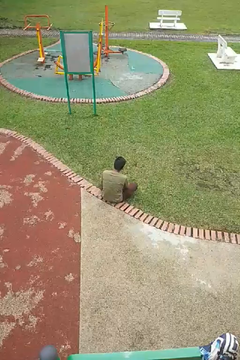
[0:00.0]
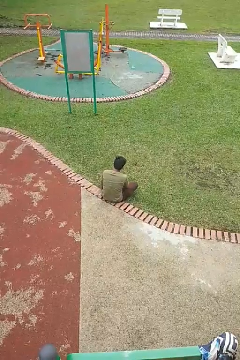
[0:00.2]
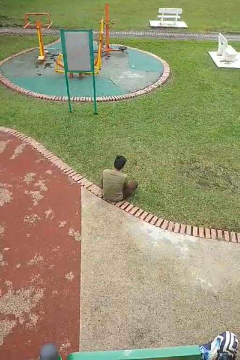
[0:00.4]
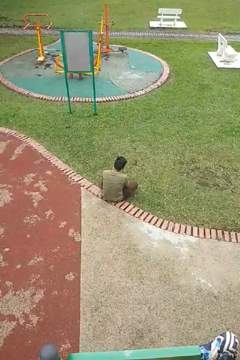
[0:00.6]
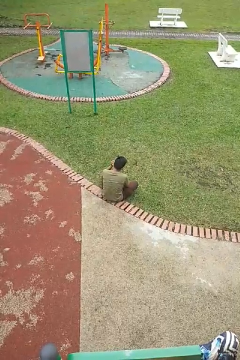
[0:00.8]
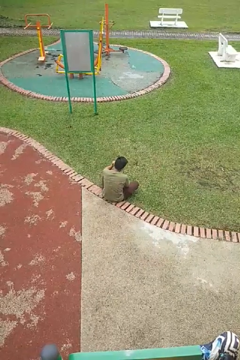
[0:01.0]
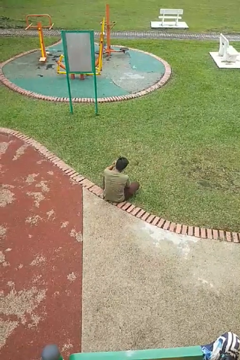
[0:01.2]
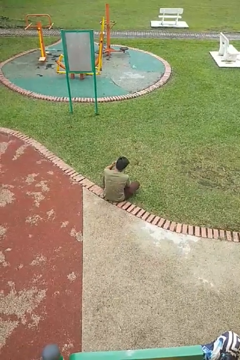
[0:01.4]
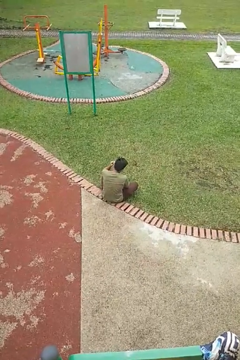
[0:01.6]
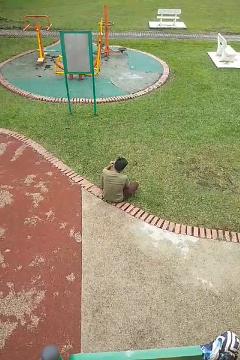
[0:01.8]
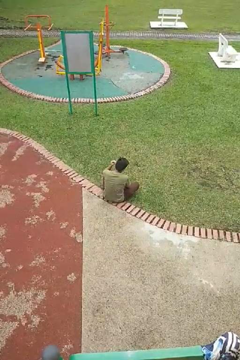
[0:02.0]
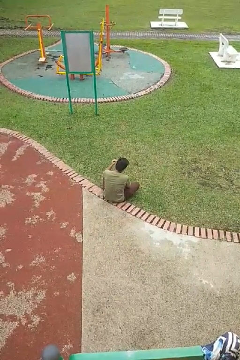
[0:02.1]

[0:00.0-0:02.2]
person touches earlobe

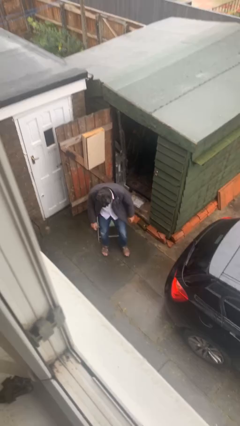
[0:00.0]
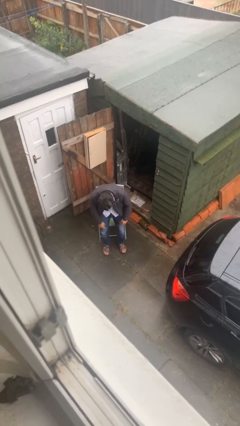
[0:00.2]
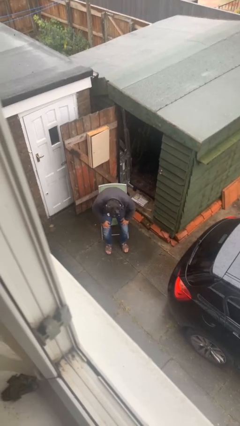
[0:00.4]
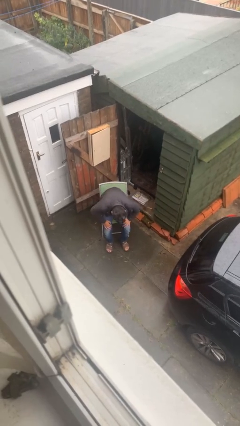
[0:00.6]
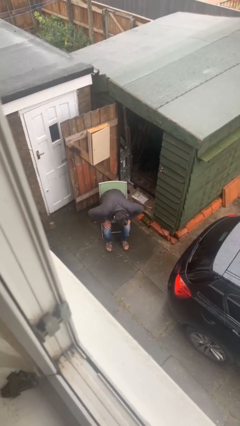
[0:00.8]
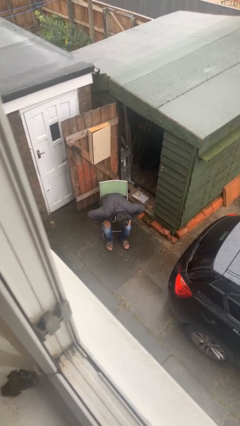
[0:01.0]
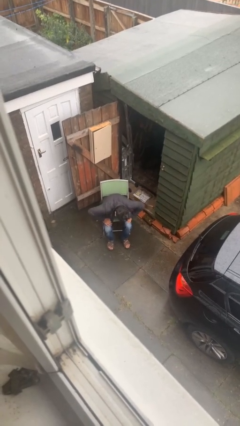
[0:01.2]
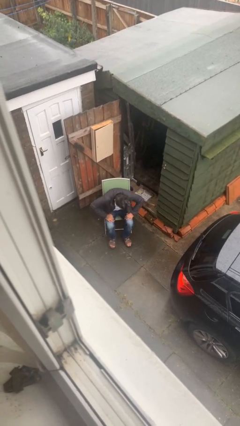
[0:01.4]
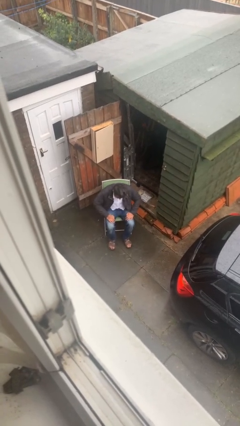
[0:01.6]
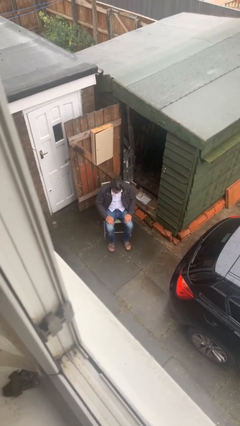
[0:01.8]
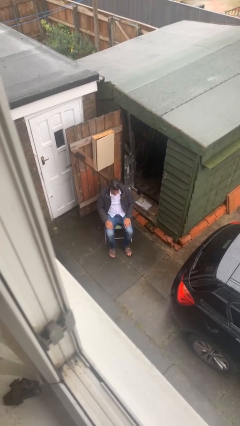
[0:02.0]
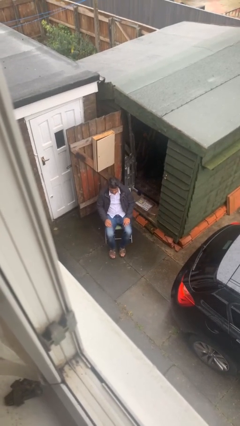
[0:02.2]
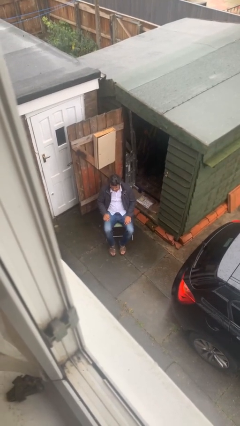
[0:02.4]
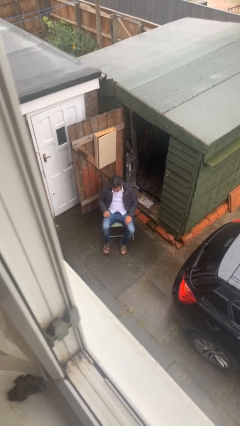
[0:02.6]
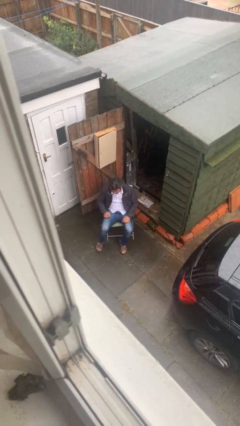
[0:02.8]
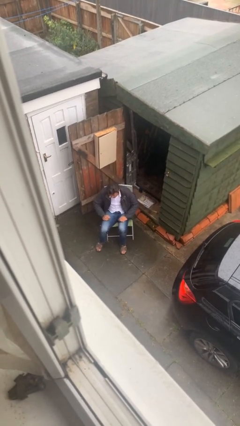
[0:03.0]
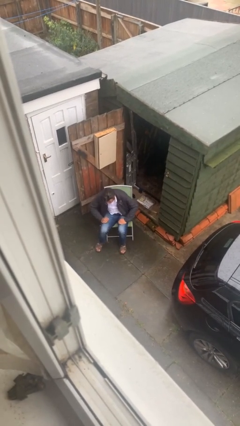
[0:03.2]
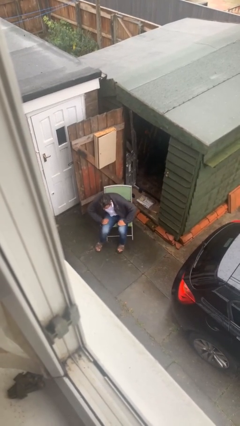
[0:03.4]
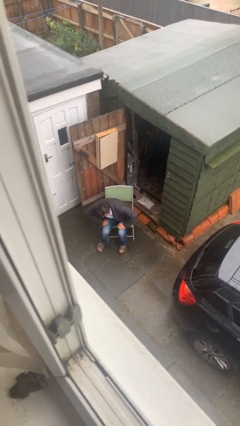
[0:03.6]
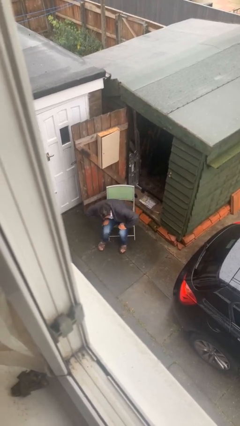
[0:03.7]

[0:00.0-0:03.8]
person sits down

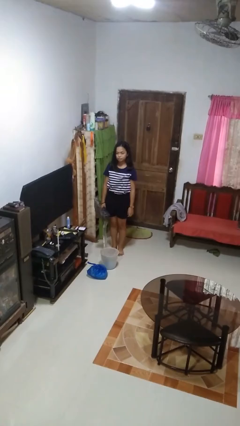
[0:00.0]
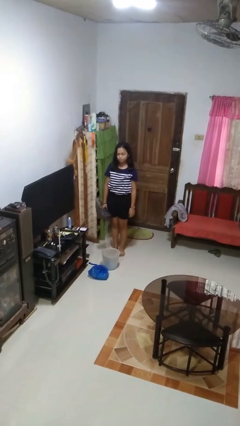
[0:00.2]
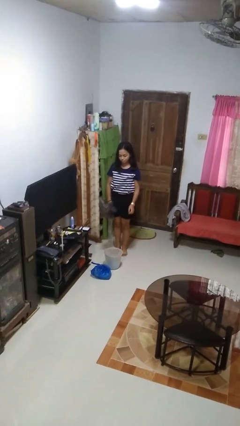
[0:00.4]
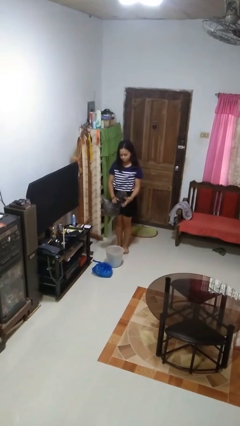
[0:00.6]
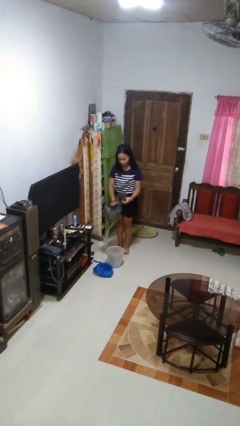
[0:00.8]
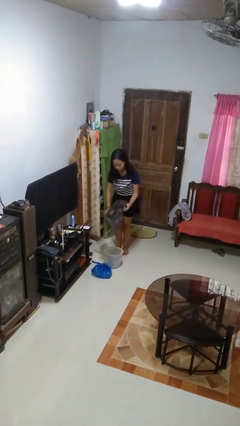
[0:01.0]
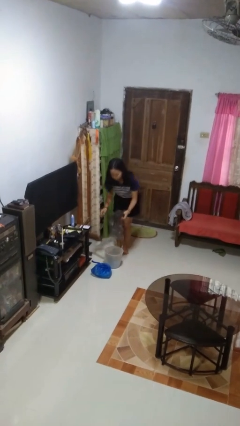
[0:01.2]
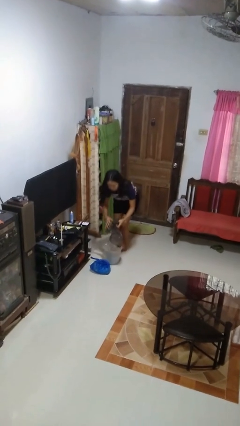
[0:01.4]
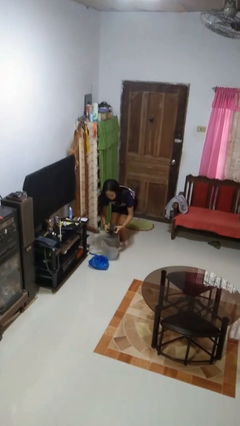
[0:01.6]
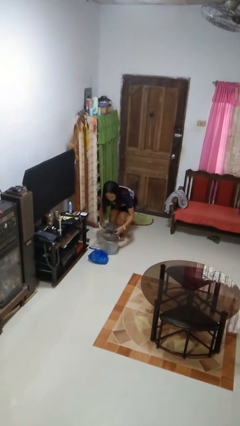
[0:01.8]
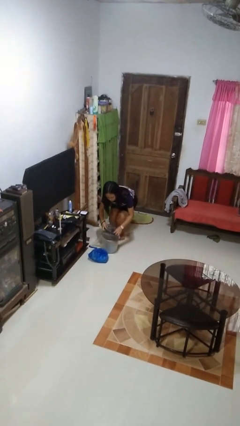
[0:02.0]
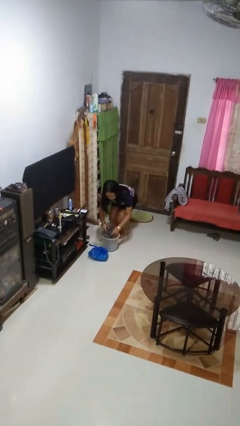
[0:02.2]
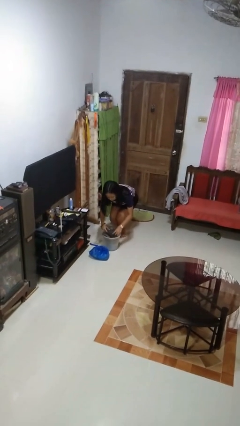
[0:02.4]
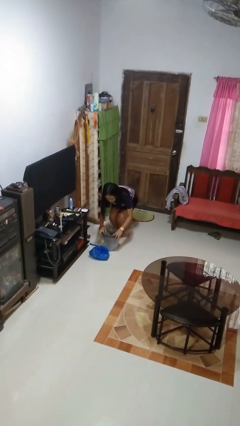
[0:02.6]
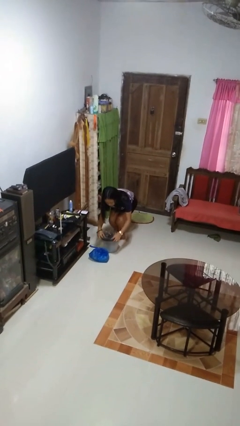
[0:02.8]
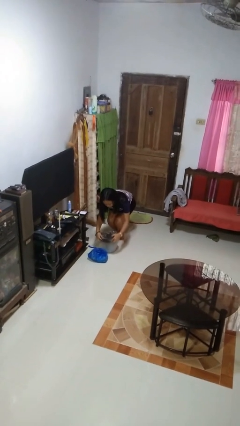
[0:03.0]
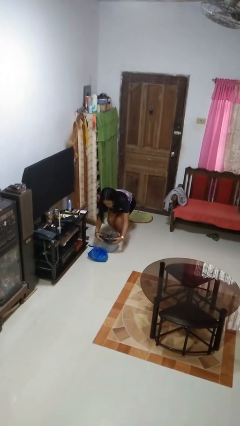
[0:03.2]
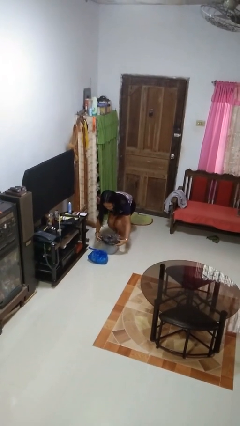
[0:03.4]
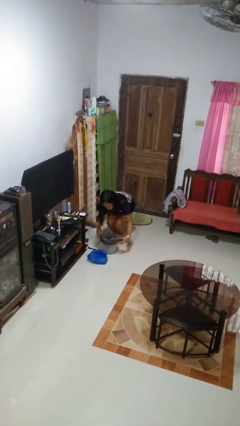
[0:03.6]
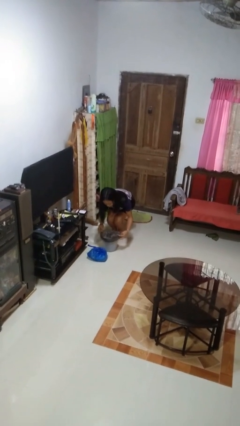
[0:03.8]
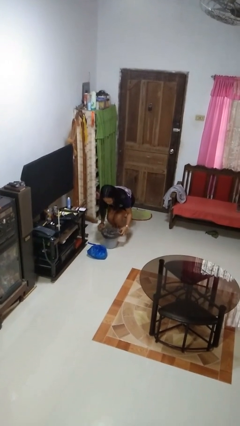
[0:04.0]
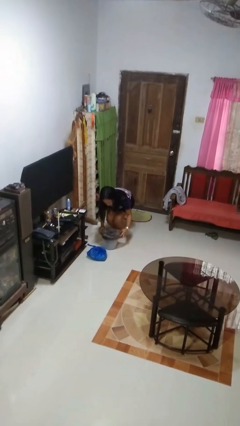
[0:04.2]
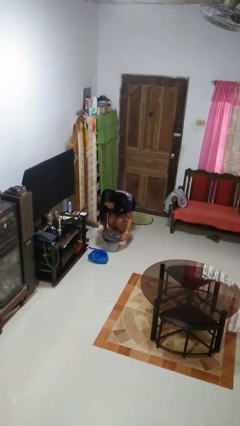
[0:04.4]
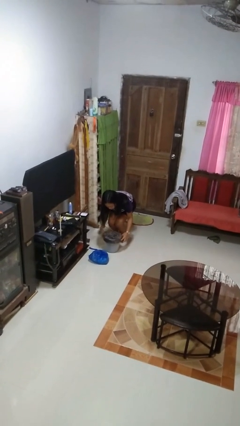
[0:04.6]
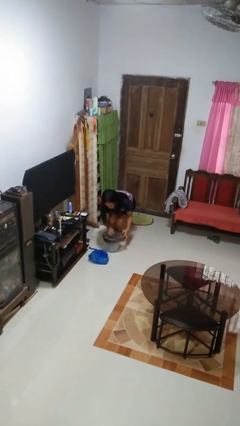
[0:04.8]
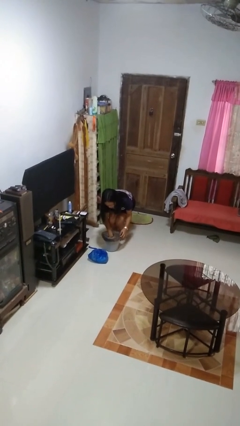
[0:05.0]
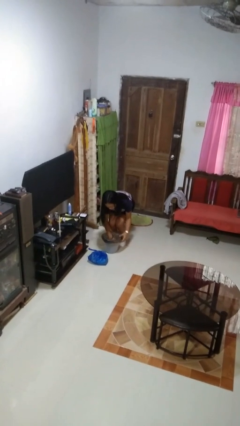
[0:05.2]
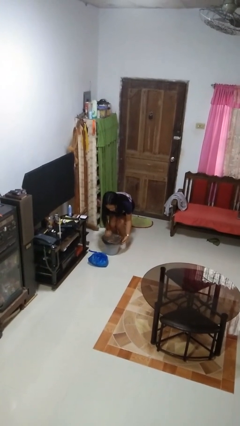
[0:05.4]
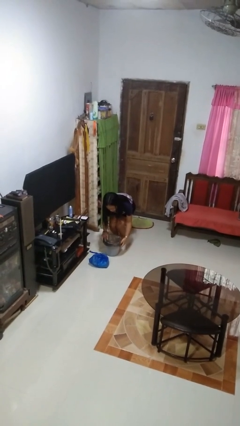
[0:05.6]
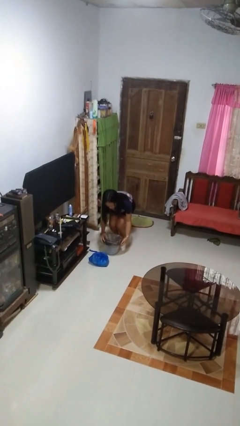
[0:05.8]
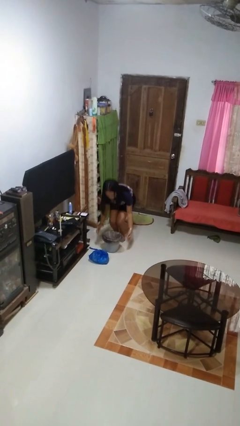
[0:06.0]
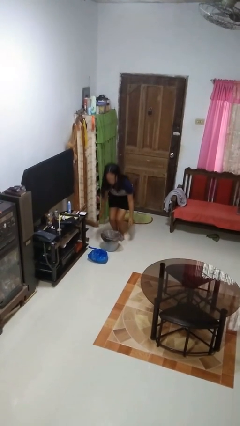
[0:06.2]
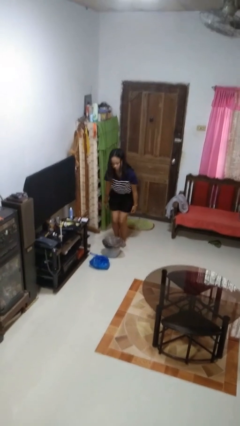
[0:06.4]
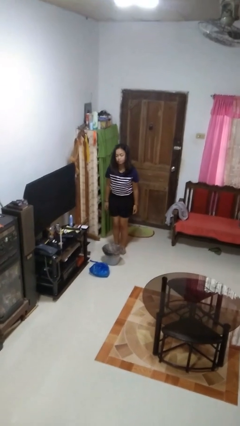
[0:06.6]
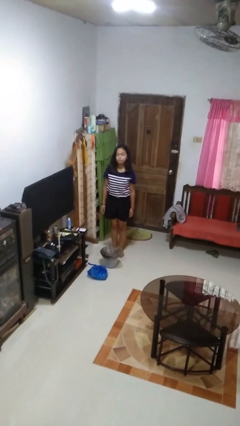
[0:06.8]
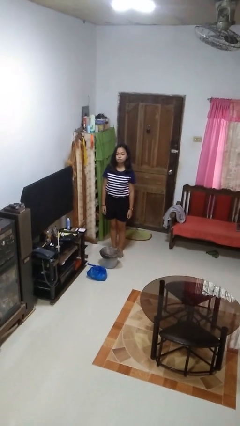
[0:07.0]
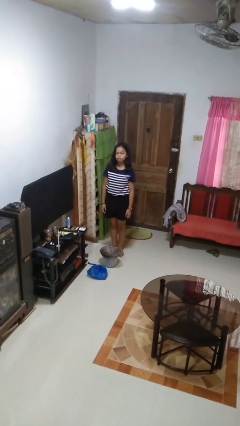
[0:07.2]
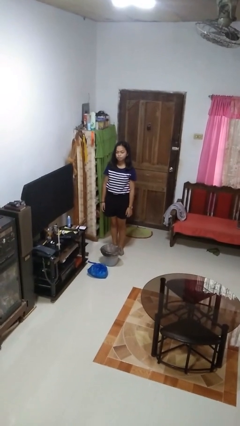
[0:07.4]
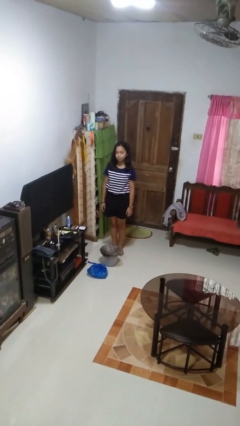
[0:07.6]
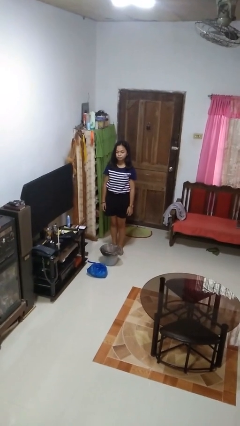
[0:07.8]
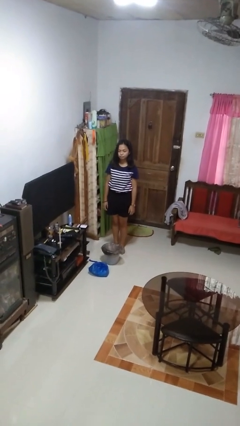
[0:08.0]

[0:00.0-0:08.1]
person inserts trashbag into trashcan

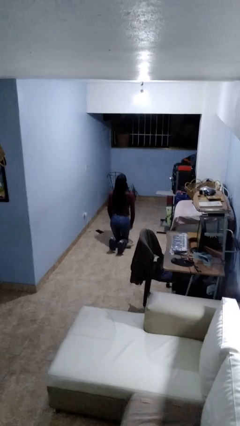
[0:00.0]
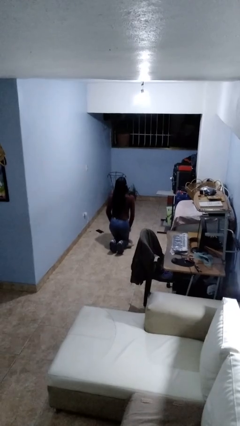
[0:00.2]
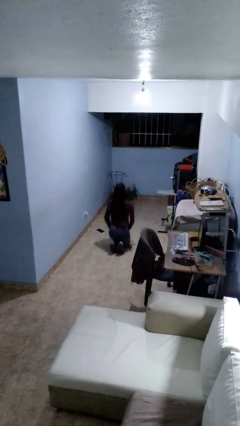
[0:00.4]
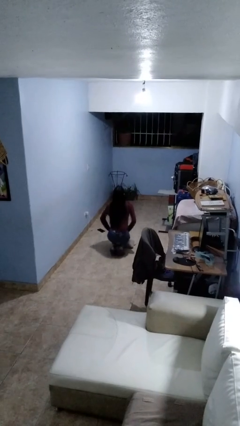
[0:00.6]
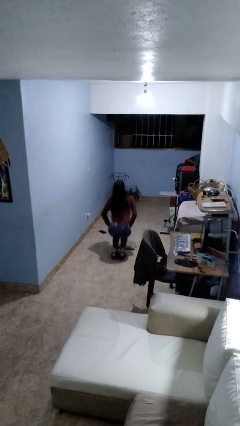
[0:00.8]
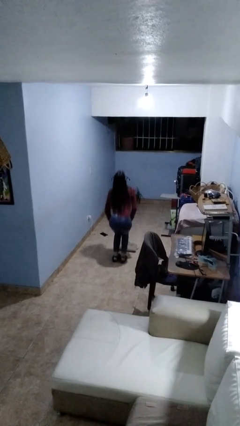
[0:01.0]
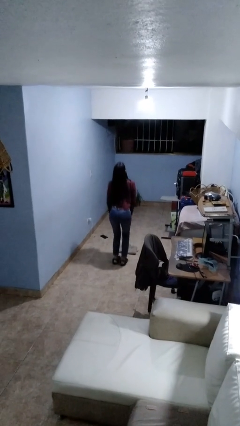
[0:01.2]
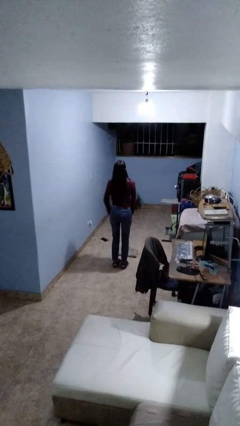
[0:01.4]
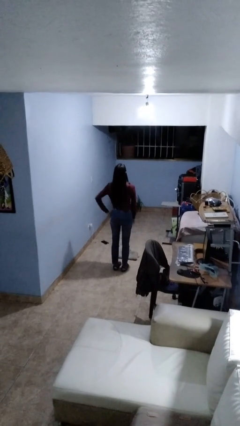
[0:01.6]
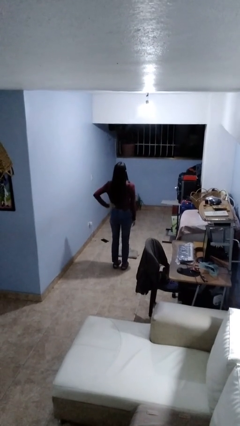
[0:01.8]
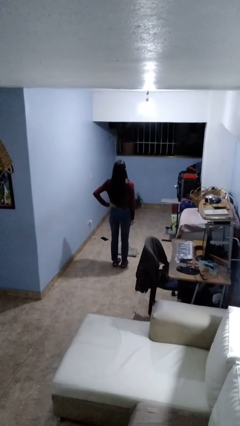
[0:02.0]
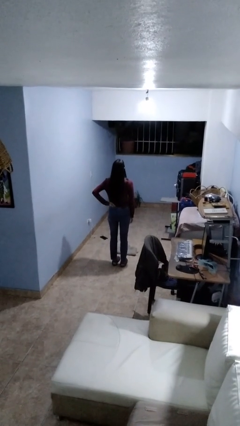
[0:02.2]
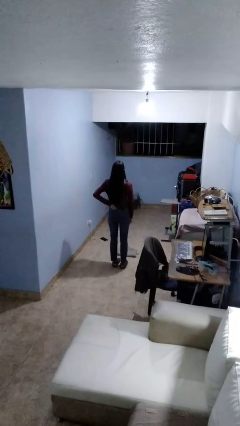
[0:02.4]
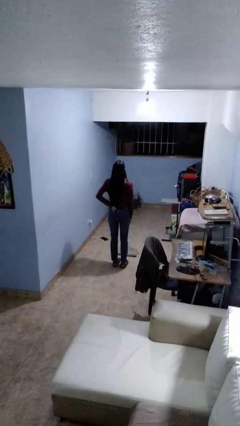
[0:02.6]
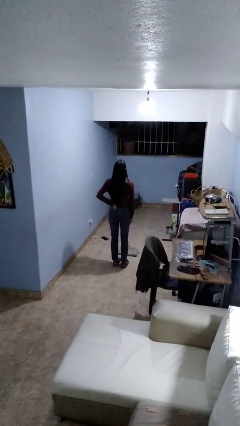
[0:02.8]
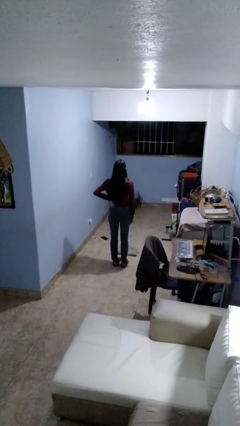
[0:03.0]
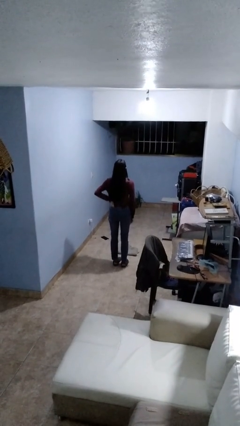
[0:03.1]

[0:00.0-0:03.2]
person stands up from floor

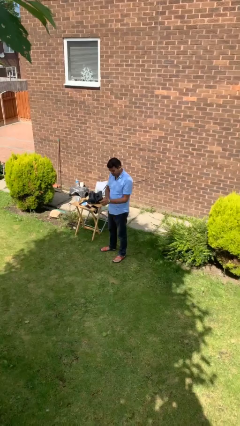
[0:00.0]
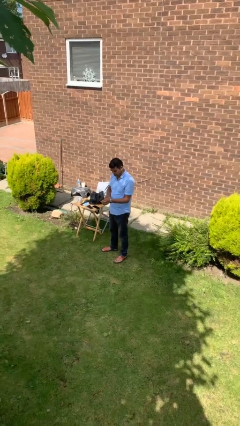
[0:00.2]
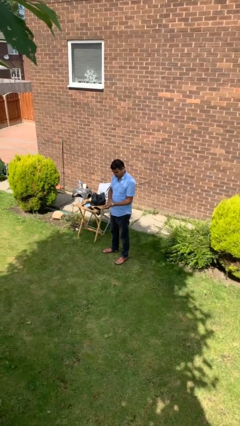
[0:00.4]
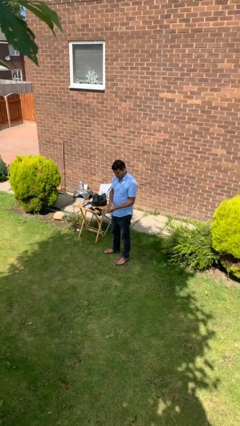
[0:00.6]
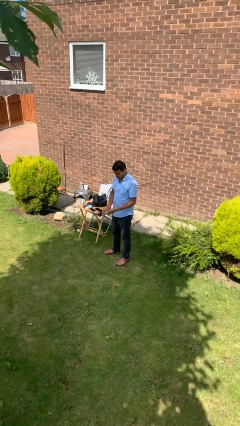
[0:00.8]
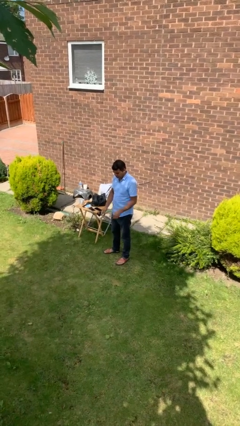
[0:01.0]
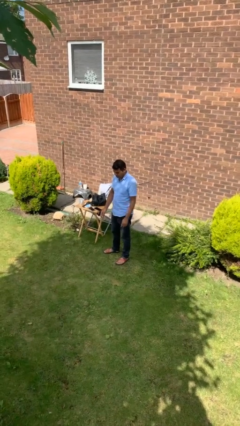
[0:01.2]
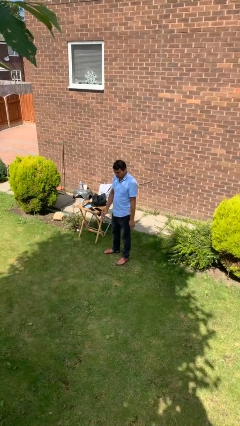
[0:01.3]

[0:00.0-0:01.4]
person takes off wristwatch
